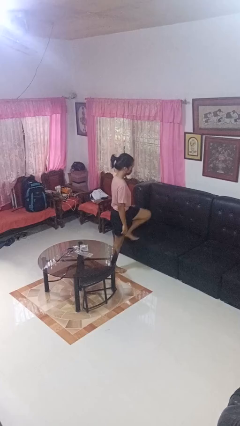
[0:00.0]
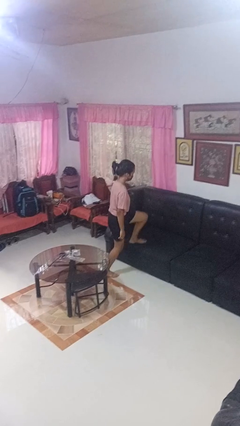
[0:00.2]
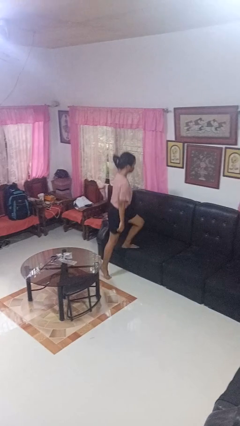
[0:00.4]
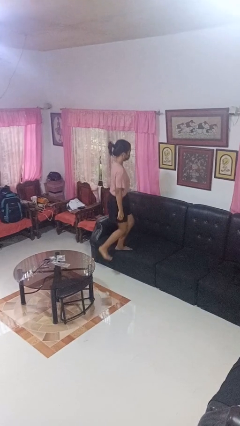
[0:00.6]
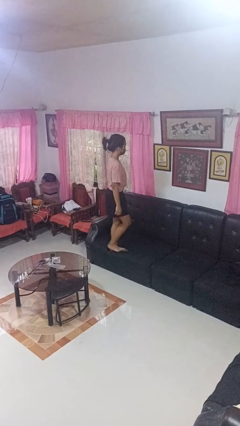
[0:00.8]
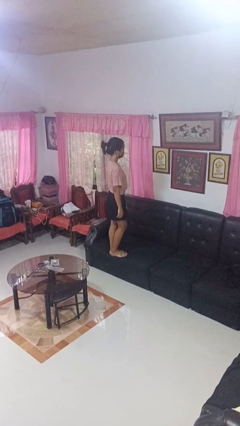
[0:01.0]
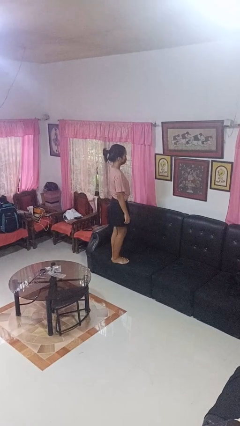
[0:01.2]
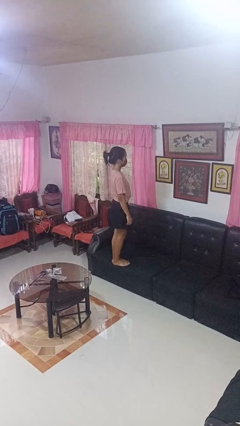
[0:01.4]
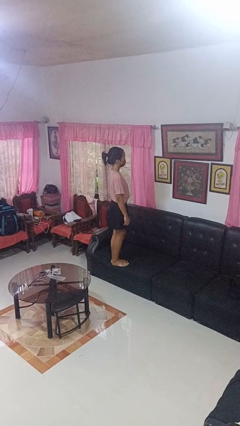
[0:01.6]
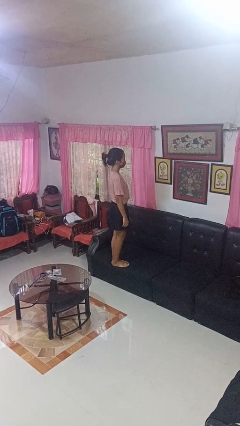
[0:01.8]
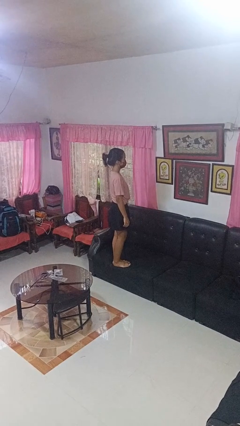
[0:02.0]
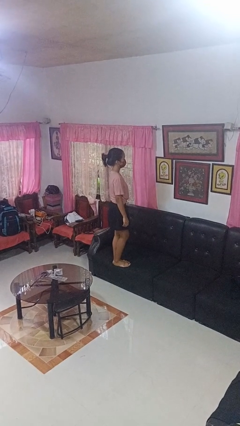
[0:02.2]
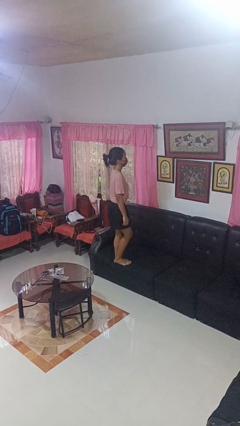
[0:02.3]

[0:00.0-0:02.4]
person climbs on couch

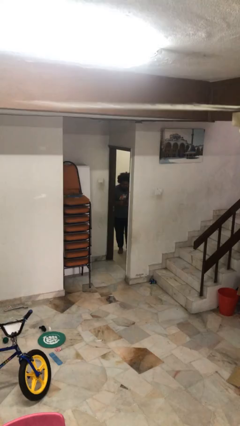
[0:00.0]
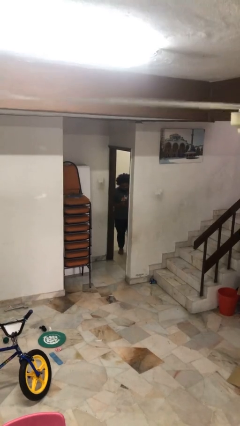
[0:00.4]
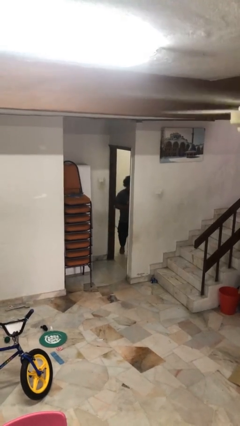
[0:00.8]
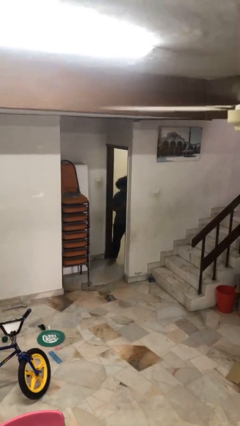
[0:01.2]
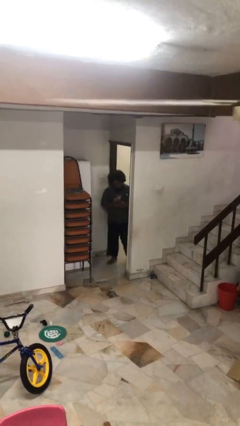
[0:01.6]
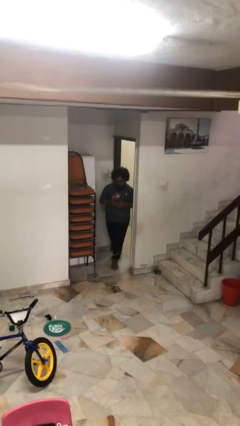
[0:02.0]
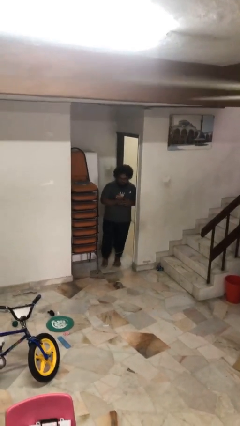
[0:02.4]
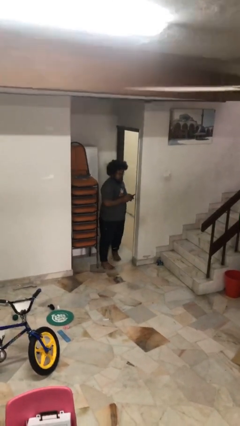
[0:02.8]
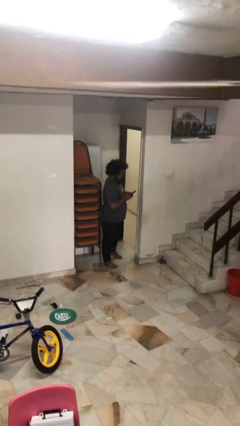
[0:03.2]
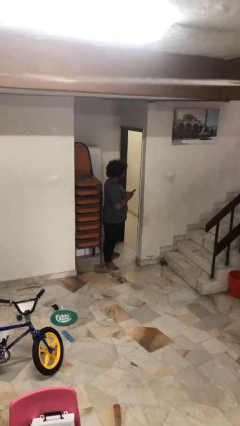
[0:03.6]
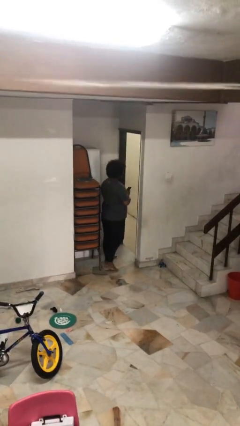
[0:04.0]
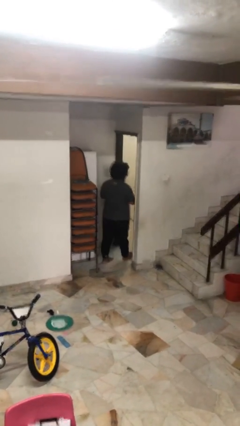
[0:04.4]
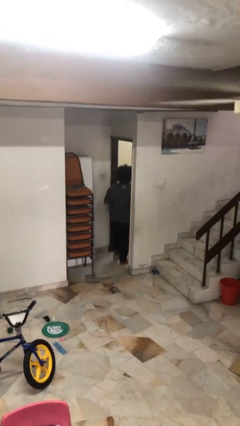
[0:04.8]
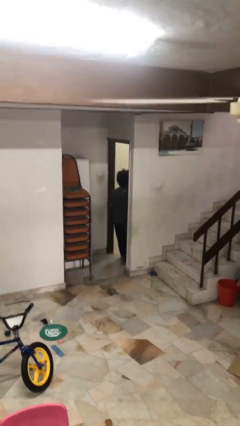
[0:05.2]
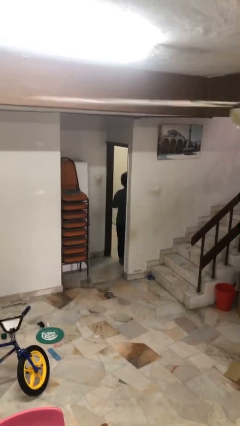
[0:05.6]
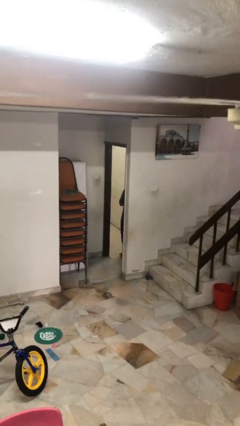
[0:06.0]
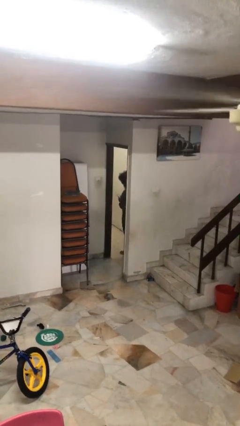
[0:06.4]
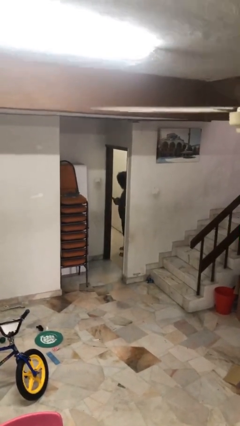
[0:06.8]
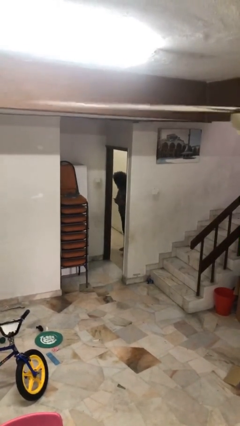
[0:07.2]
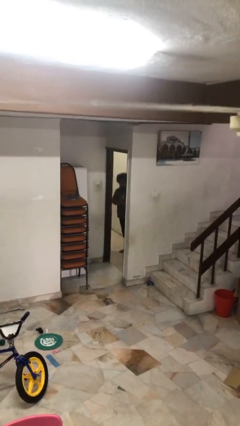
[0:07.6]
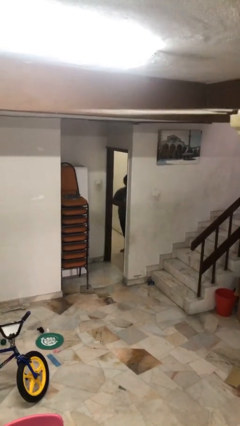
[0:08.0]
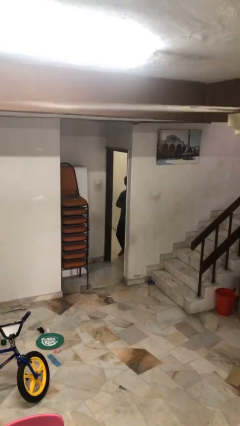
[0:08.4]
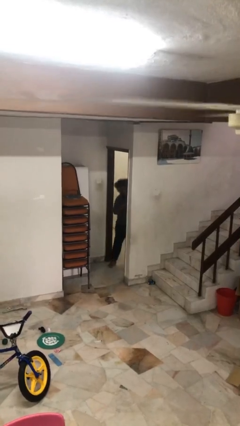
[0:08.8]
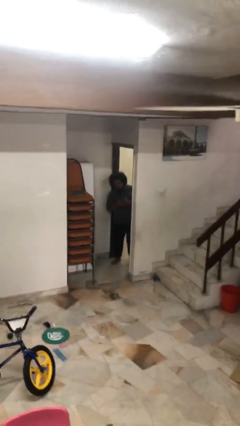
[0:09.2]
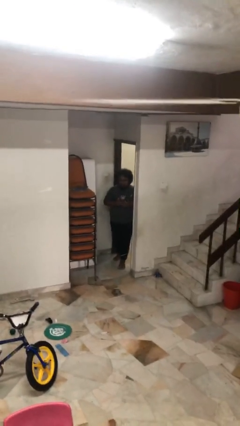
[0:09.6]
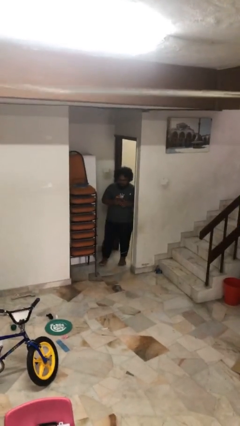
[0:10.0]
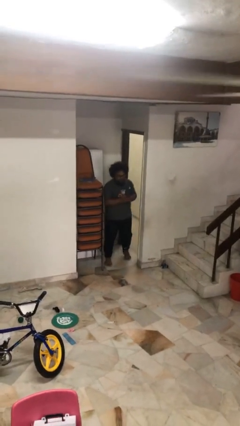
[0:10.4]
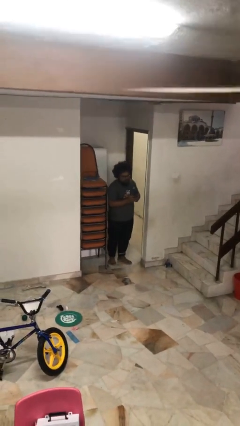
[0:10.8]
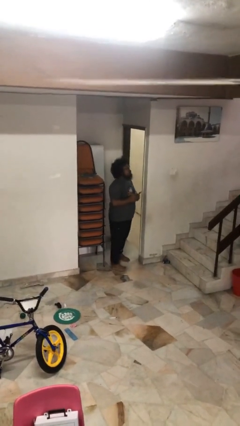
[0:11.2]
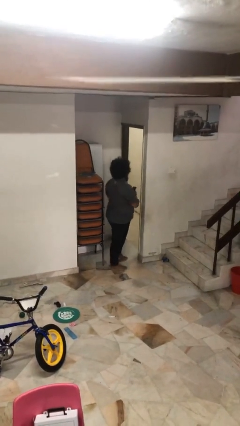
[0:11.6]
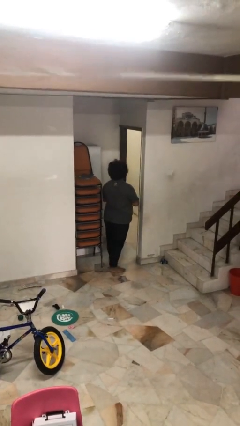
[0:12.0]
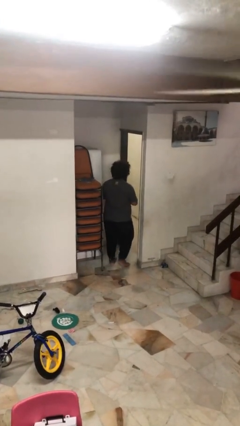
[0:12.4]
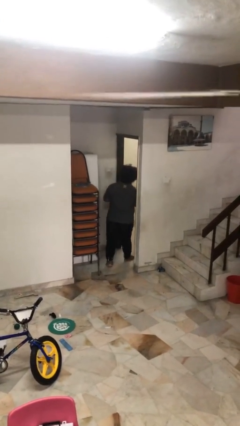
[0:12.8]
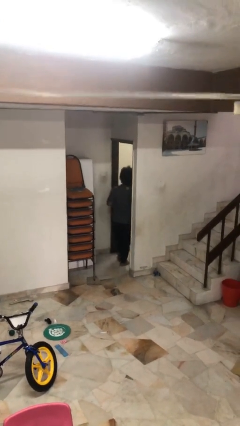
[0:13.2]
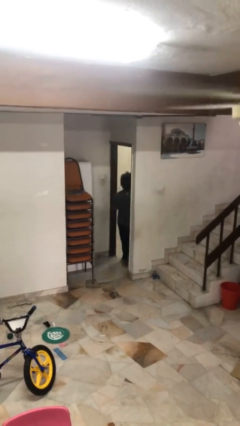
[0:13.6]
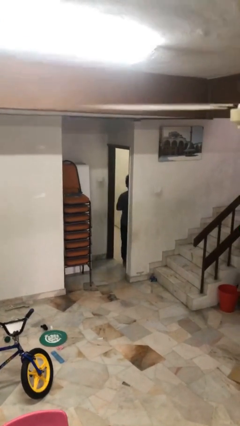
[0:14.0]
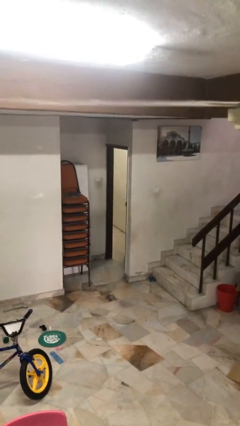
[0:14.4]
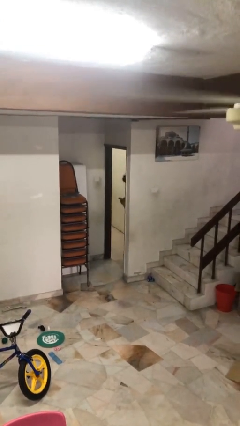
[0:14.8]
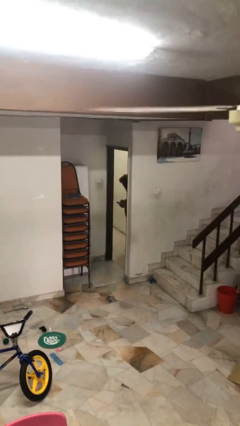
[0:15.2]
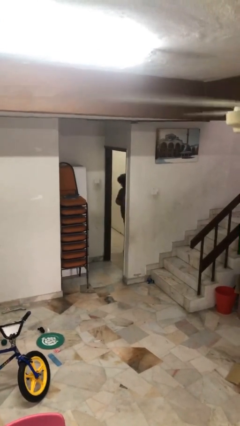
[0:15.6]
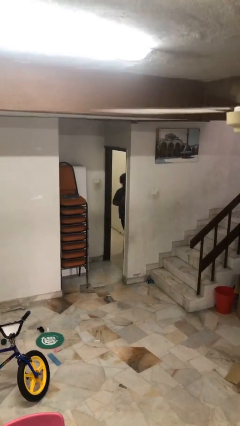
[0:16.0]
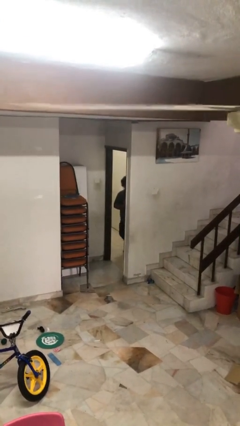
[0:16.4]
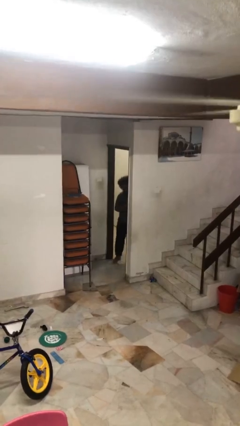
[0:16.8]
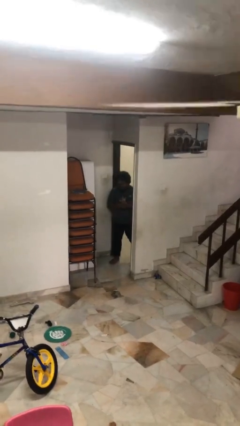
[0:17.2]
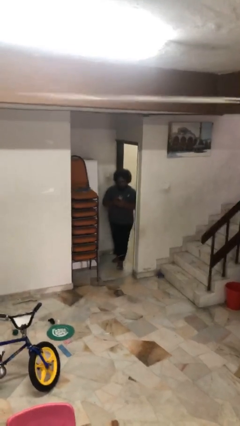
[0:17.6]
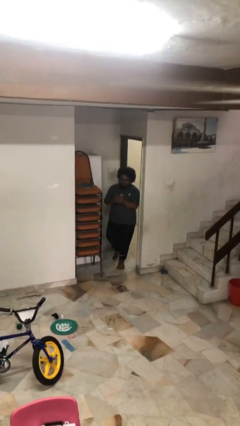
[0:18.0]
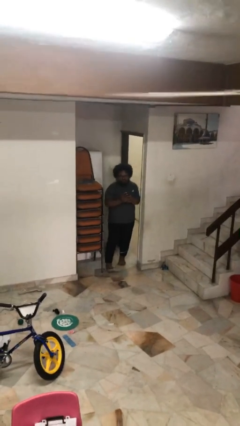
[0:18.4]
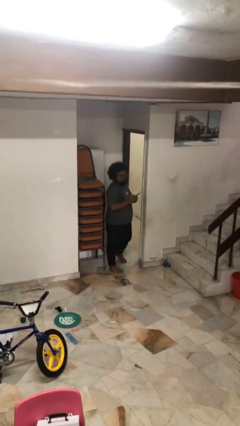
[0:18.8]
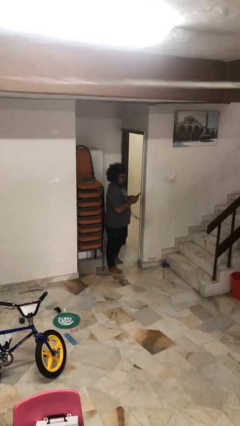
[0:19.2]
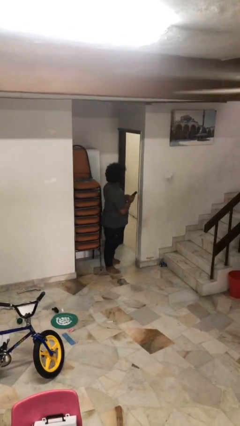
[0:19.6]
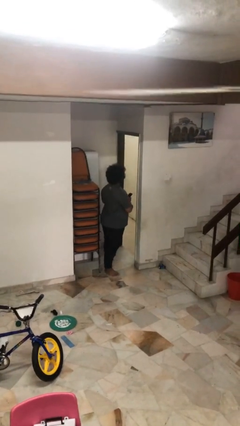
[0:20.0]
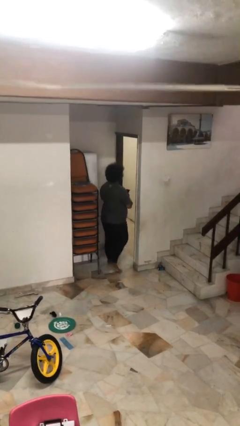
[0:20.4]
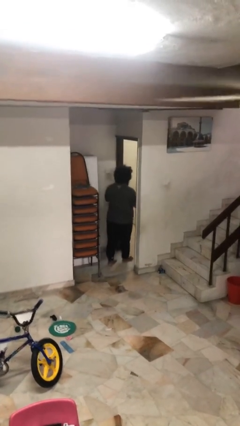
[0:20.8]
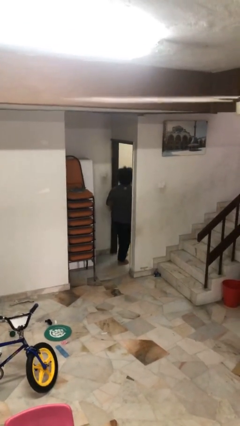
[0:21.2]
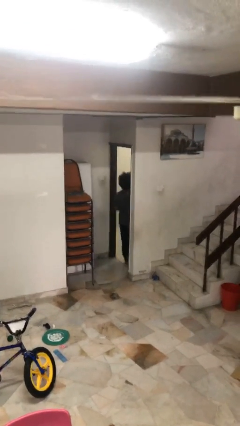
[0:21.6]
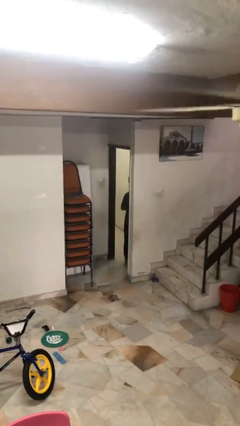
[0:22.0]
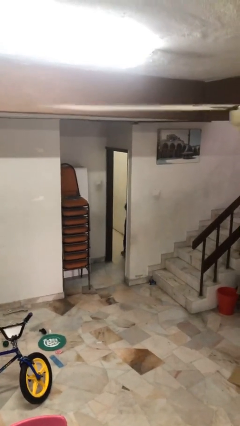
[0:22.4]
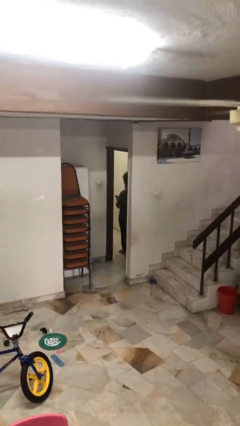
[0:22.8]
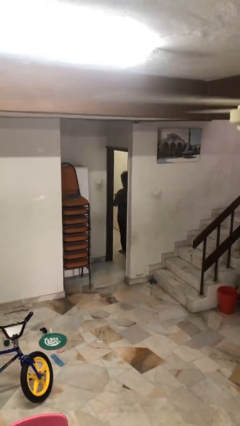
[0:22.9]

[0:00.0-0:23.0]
person texts on phone

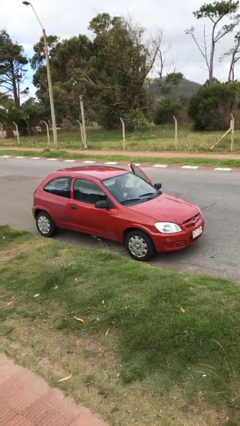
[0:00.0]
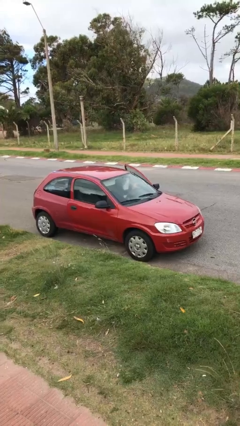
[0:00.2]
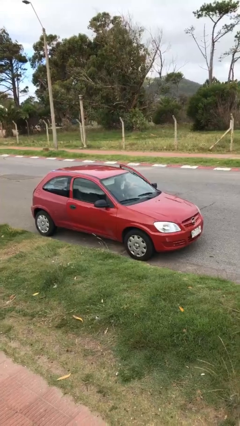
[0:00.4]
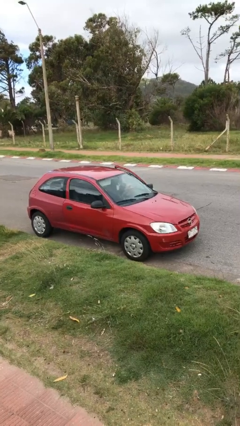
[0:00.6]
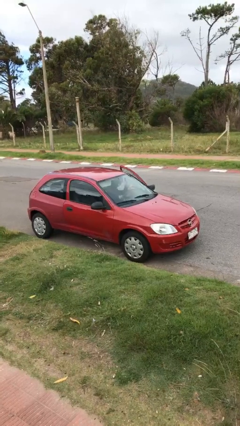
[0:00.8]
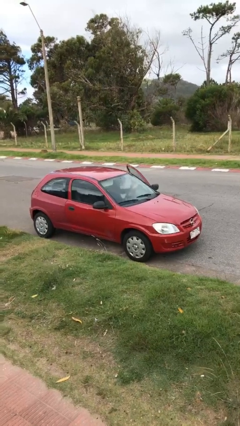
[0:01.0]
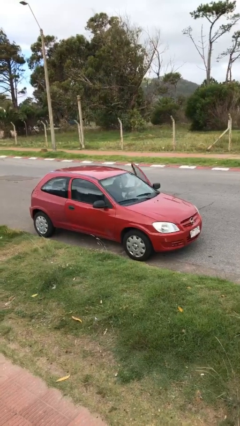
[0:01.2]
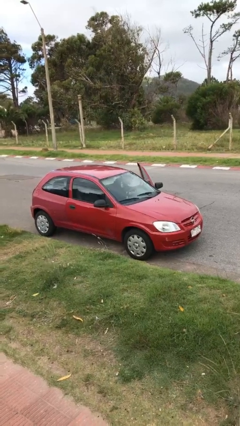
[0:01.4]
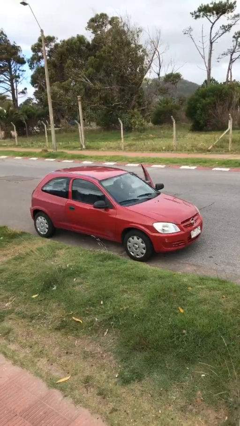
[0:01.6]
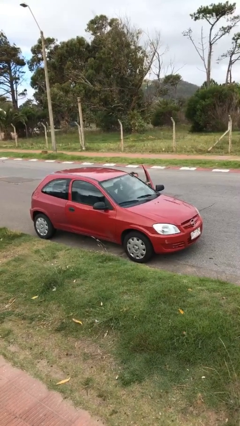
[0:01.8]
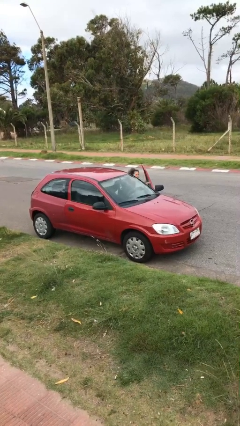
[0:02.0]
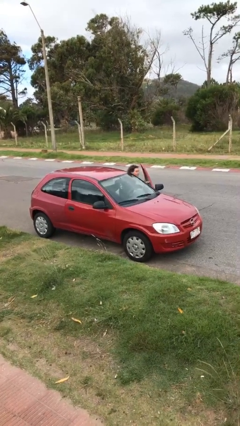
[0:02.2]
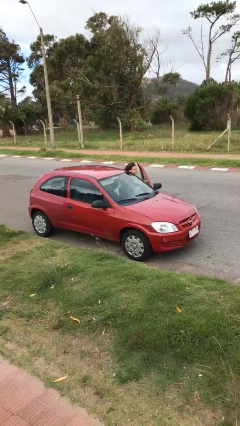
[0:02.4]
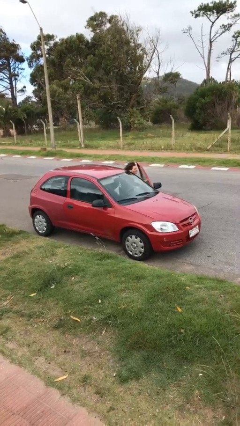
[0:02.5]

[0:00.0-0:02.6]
car drops off person

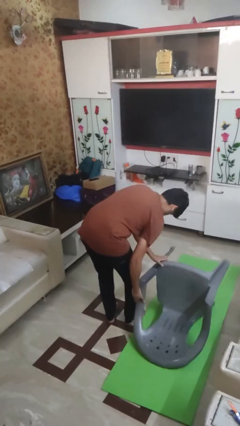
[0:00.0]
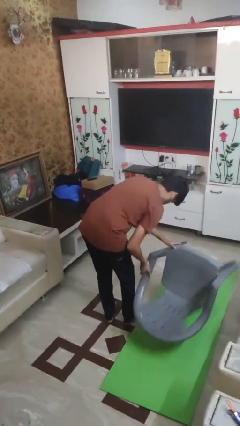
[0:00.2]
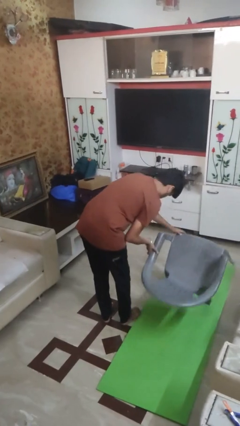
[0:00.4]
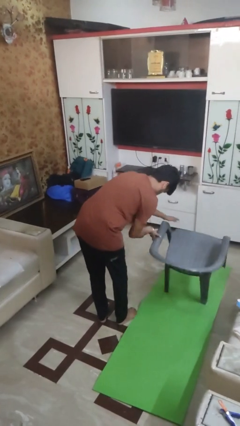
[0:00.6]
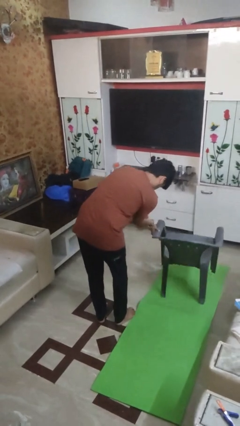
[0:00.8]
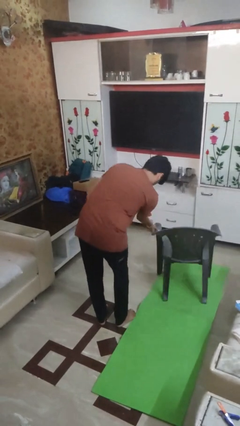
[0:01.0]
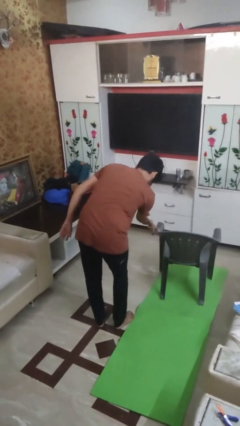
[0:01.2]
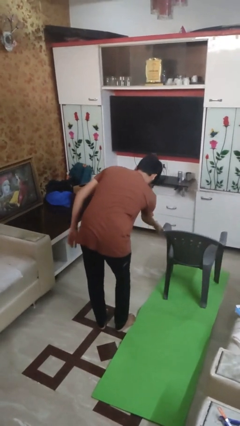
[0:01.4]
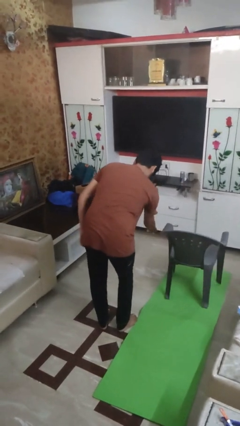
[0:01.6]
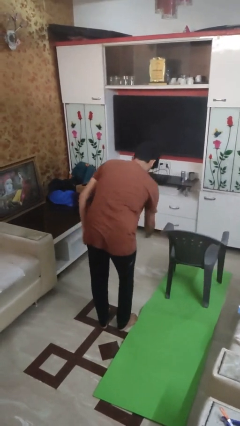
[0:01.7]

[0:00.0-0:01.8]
person sets upright furniture
